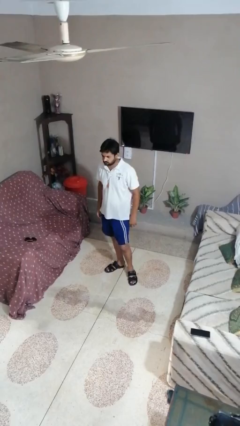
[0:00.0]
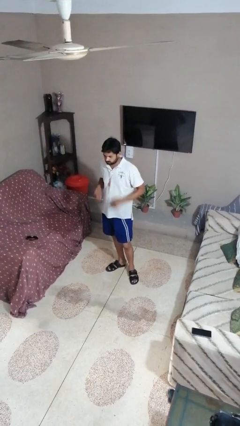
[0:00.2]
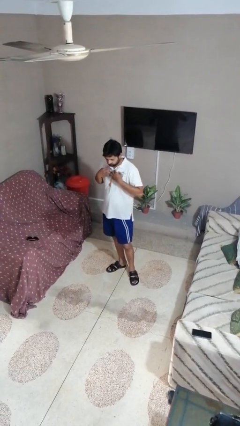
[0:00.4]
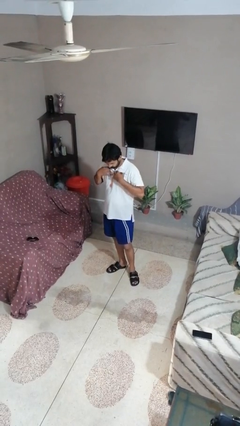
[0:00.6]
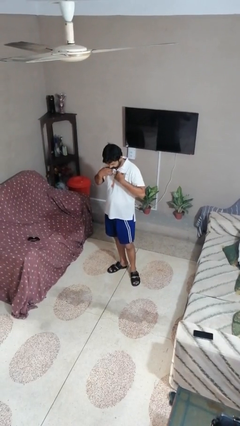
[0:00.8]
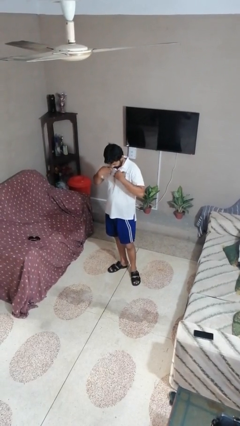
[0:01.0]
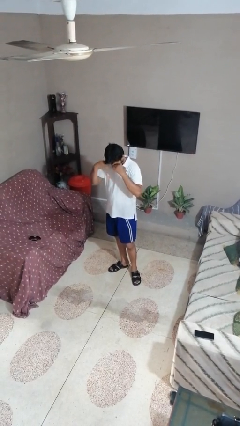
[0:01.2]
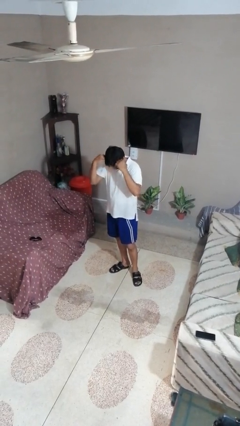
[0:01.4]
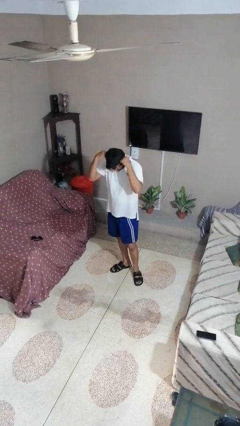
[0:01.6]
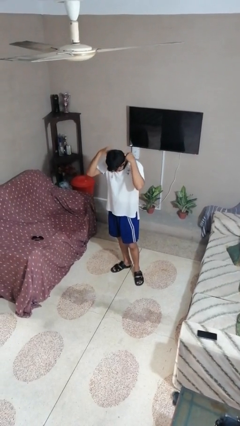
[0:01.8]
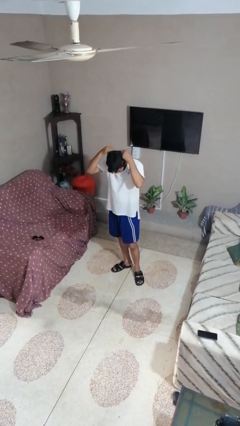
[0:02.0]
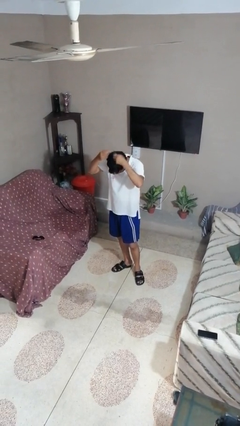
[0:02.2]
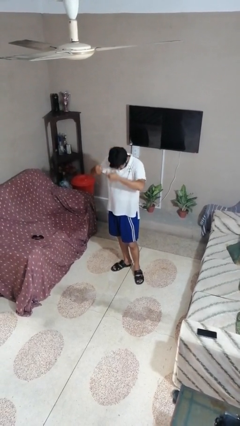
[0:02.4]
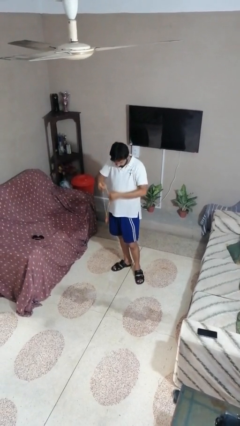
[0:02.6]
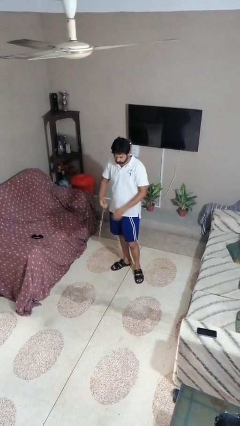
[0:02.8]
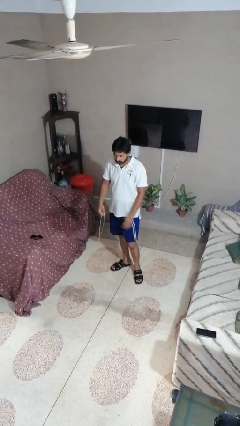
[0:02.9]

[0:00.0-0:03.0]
person takes off necklace

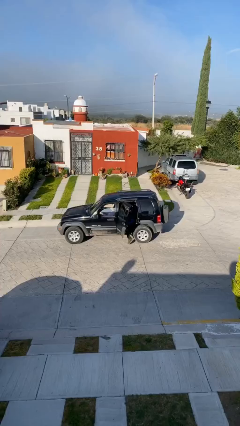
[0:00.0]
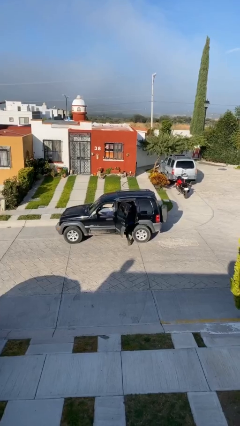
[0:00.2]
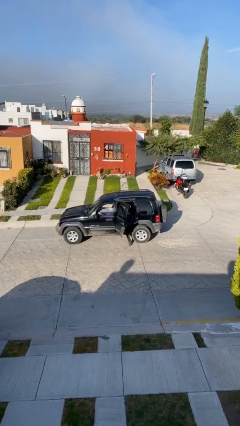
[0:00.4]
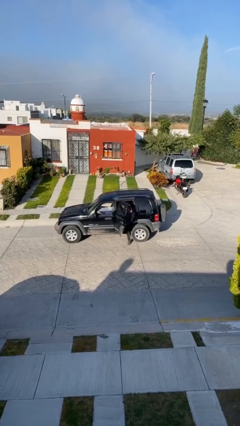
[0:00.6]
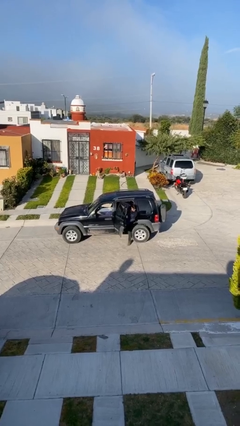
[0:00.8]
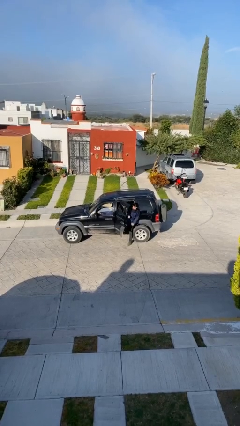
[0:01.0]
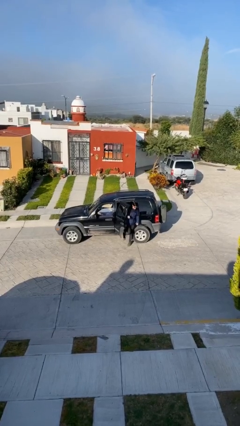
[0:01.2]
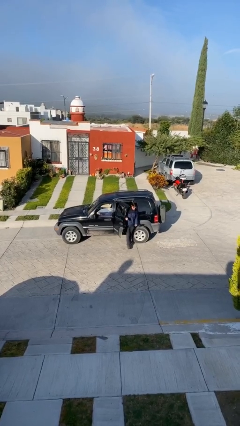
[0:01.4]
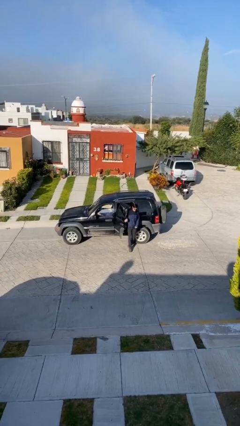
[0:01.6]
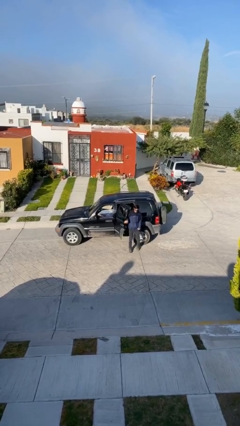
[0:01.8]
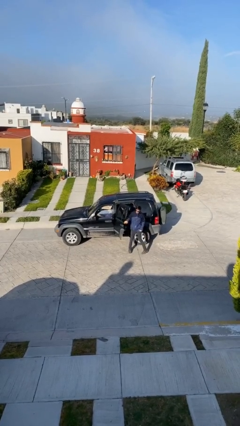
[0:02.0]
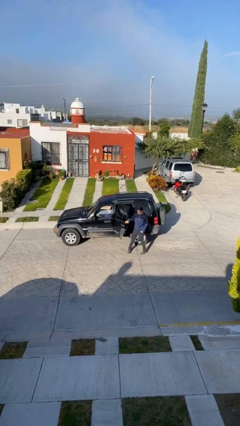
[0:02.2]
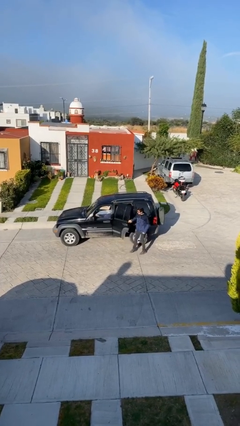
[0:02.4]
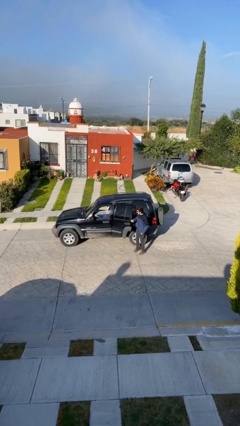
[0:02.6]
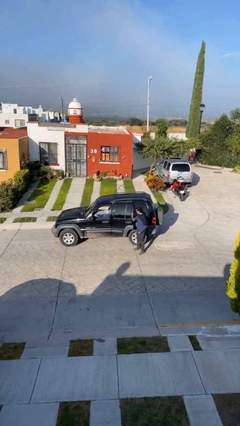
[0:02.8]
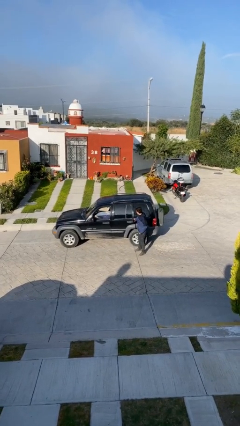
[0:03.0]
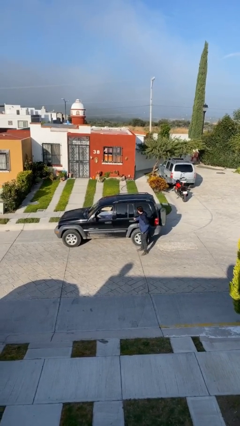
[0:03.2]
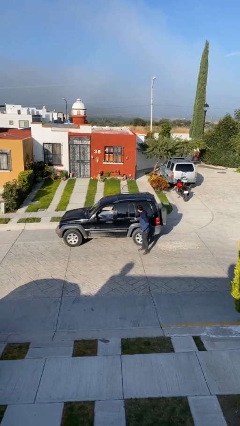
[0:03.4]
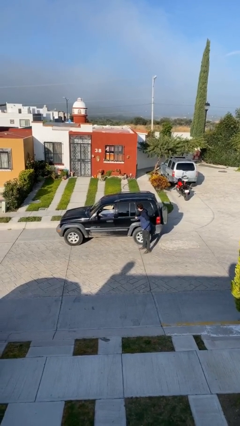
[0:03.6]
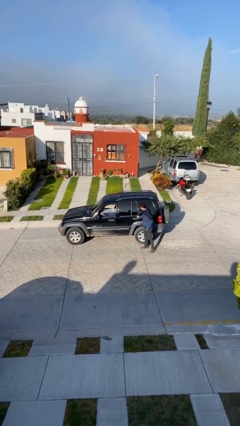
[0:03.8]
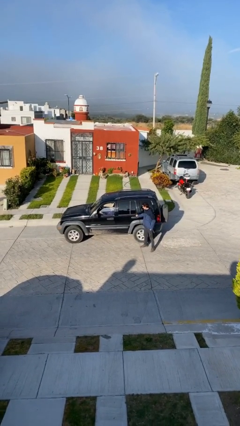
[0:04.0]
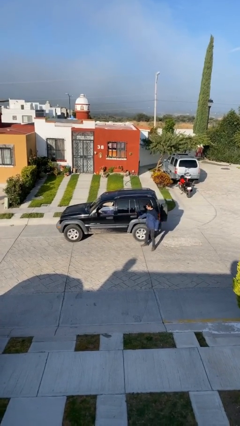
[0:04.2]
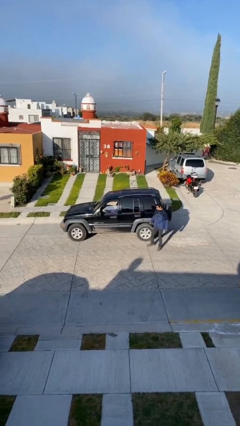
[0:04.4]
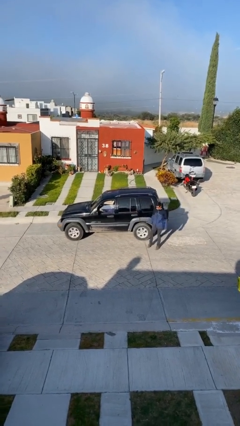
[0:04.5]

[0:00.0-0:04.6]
car drops off person

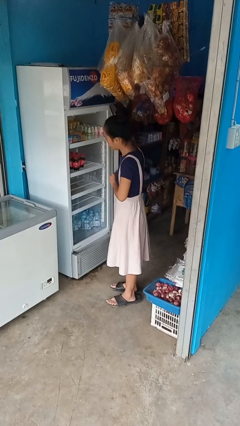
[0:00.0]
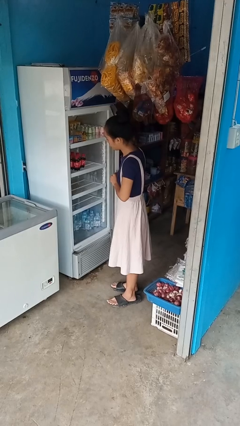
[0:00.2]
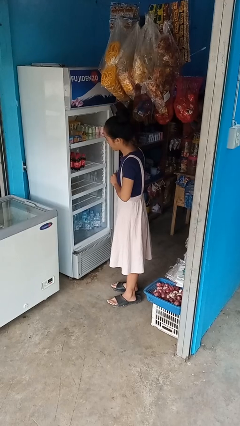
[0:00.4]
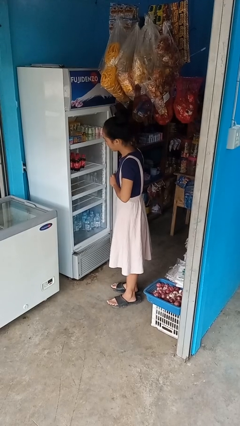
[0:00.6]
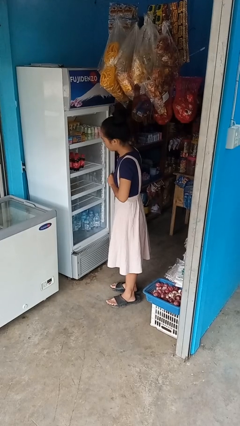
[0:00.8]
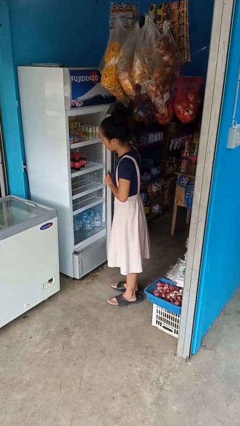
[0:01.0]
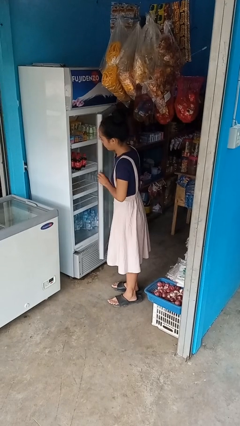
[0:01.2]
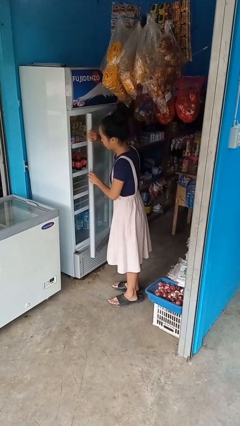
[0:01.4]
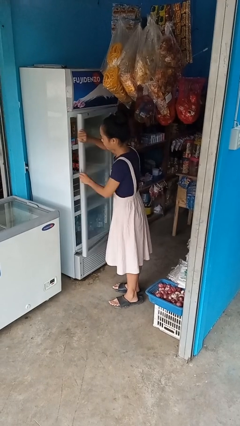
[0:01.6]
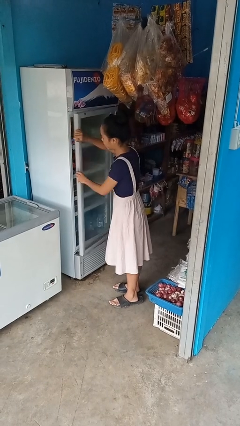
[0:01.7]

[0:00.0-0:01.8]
person opens refrigerator

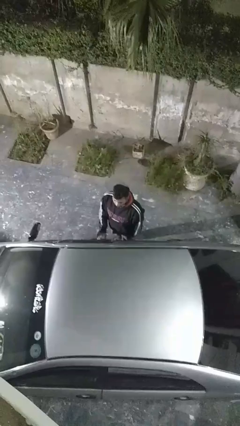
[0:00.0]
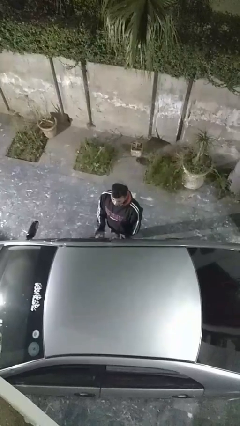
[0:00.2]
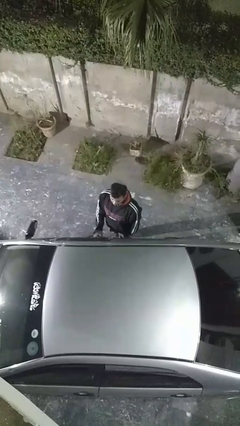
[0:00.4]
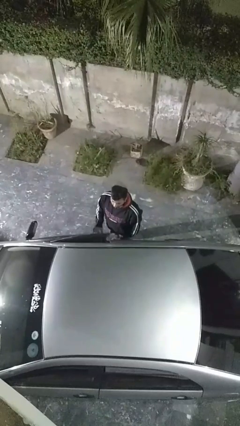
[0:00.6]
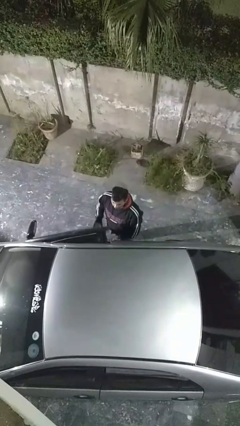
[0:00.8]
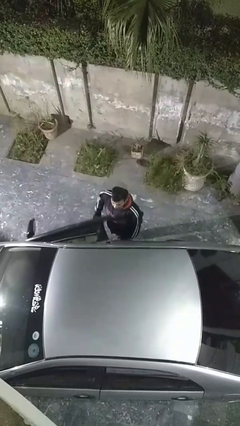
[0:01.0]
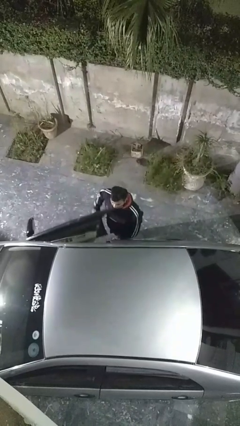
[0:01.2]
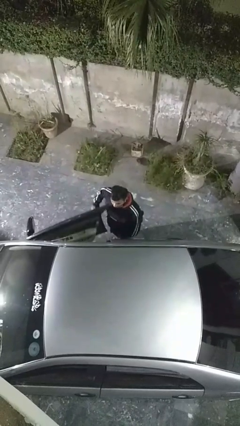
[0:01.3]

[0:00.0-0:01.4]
person opens car door

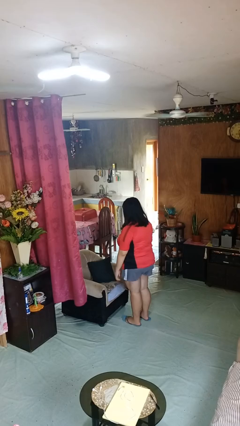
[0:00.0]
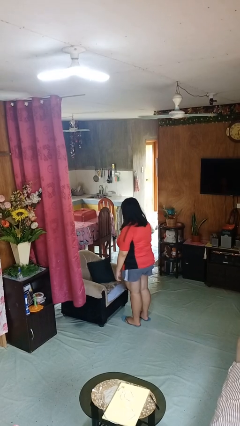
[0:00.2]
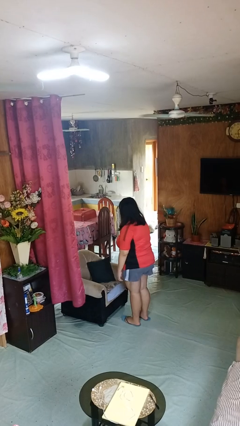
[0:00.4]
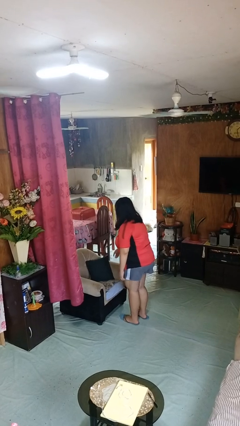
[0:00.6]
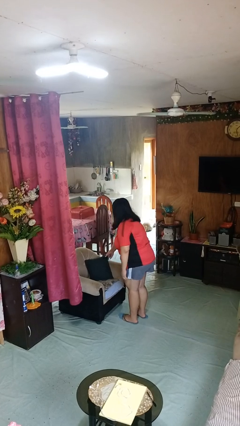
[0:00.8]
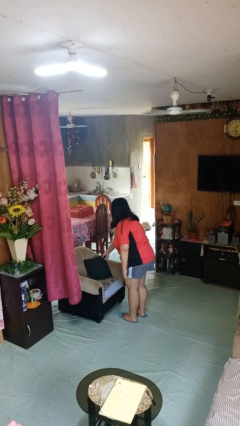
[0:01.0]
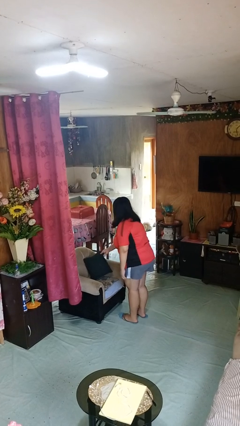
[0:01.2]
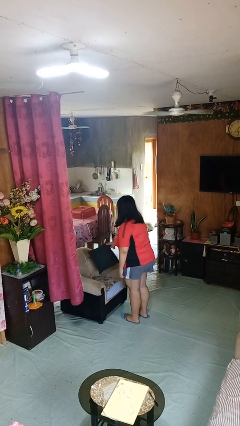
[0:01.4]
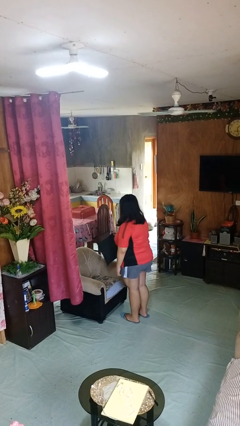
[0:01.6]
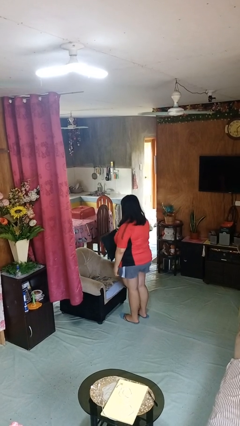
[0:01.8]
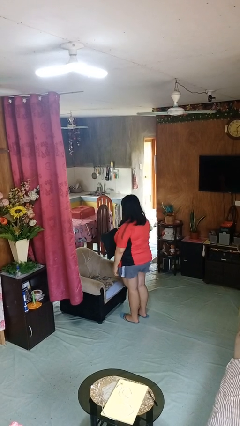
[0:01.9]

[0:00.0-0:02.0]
person picks up object from couch

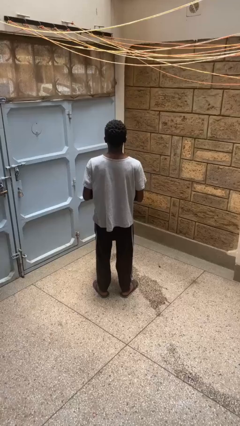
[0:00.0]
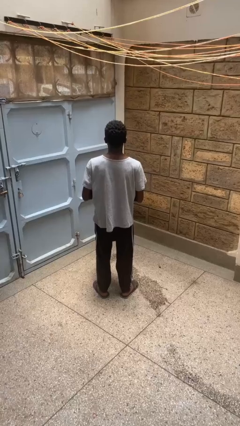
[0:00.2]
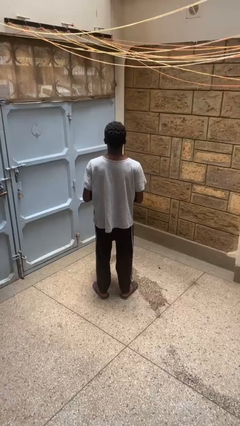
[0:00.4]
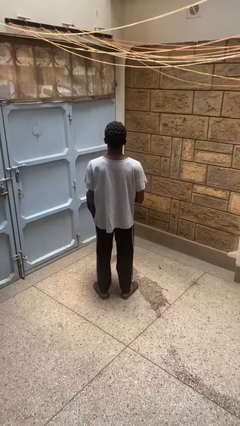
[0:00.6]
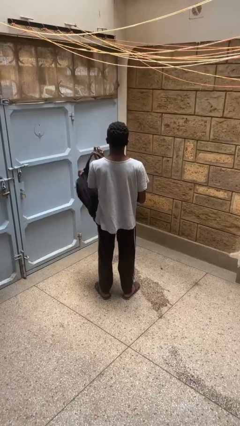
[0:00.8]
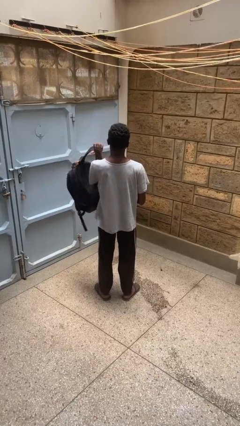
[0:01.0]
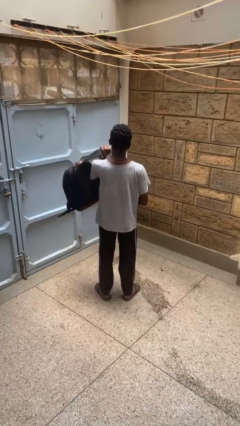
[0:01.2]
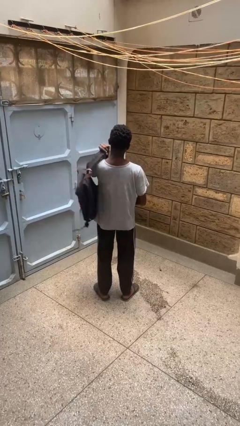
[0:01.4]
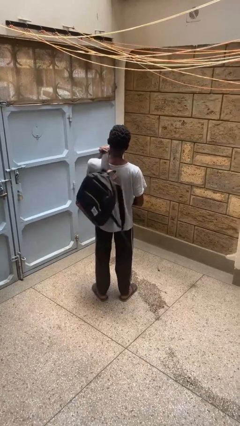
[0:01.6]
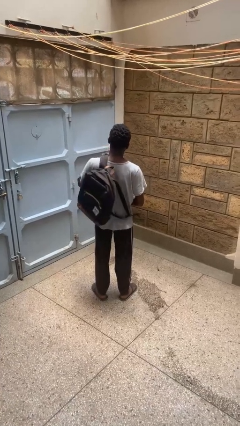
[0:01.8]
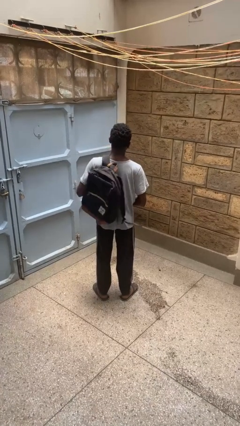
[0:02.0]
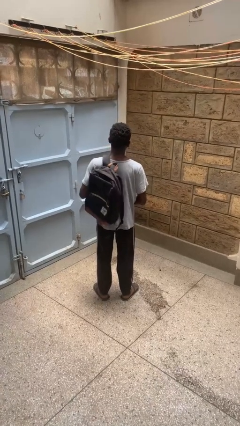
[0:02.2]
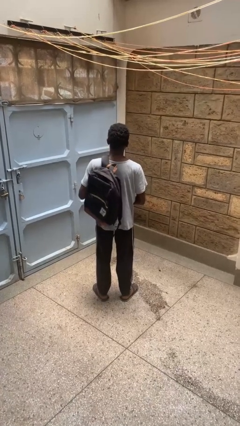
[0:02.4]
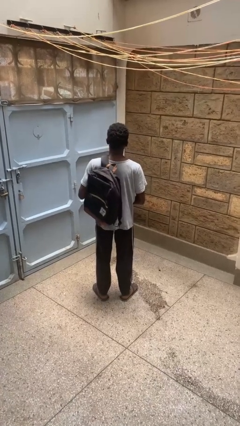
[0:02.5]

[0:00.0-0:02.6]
person puts on backpack

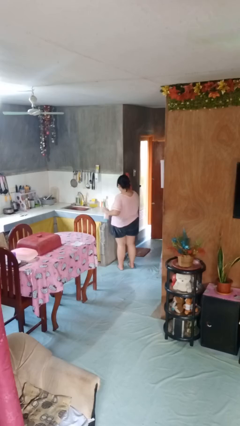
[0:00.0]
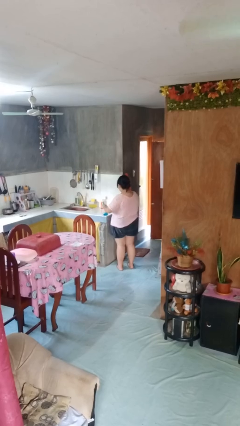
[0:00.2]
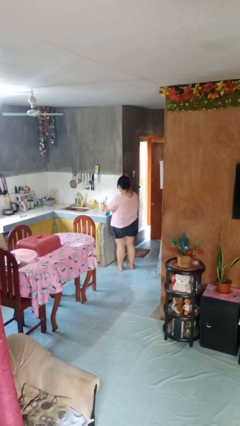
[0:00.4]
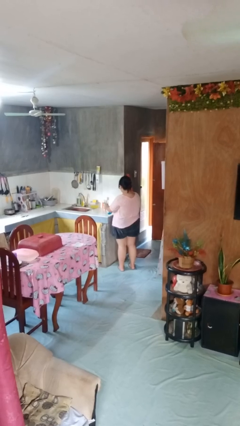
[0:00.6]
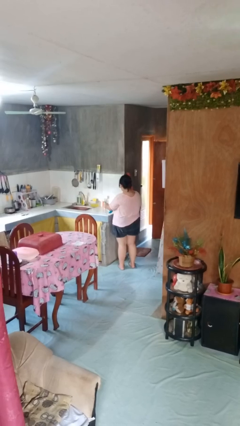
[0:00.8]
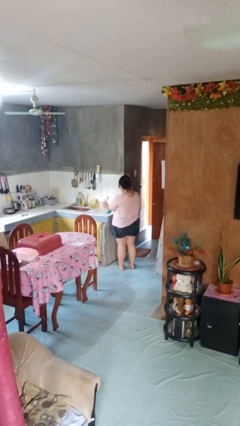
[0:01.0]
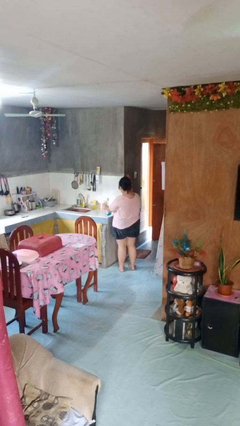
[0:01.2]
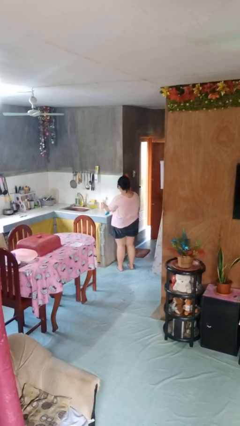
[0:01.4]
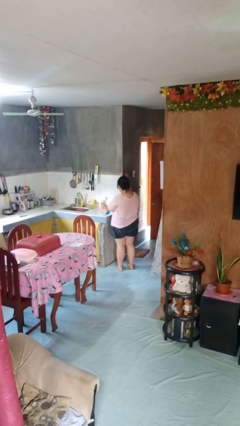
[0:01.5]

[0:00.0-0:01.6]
person sprays from bottle
